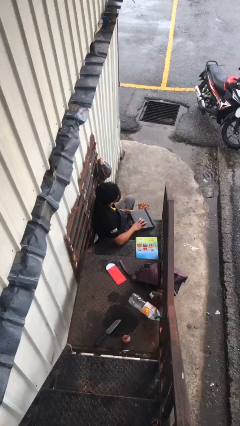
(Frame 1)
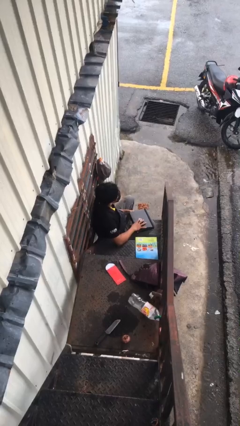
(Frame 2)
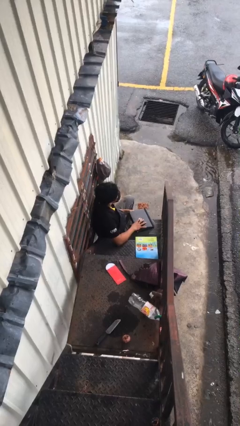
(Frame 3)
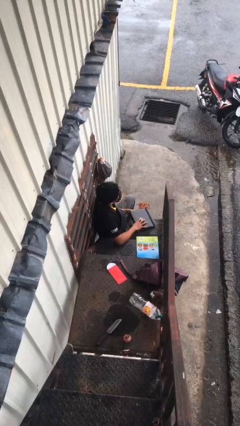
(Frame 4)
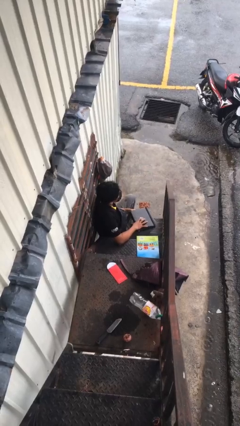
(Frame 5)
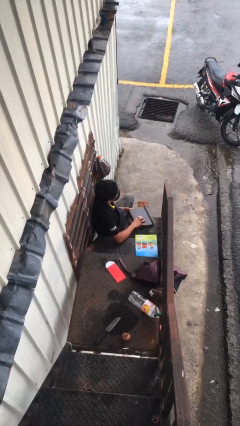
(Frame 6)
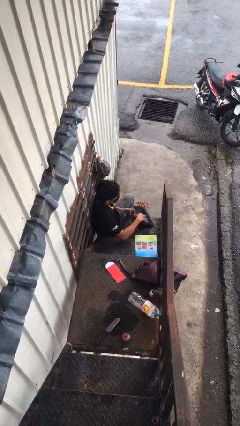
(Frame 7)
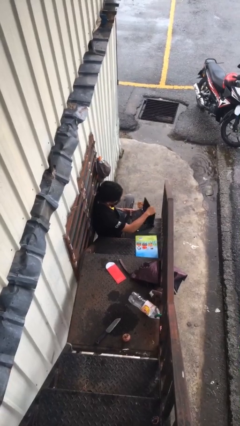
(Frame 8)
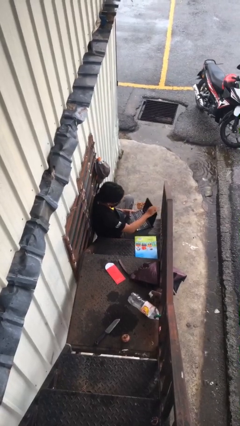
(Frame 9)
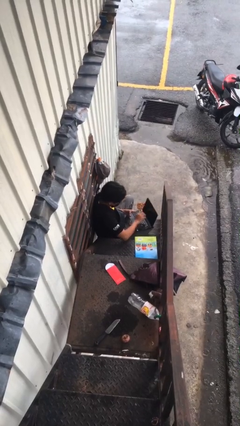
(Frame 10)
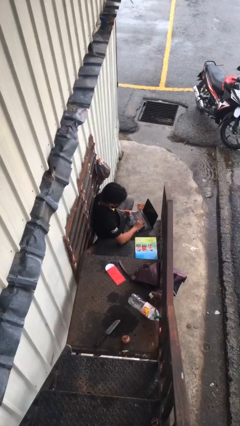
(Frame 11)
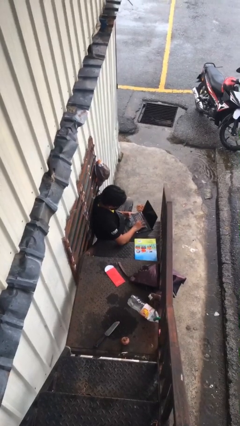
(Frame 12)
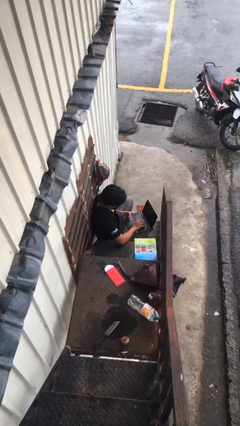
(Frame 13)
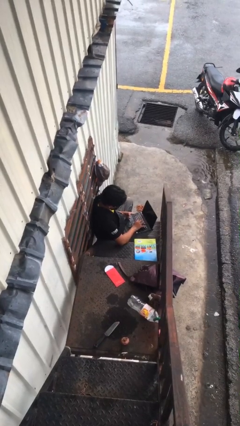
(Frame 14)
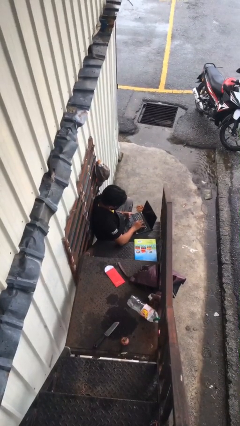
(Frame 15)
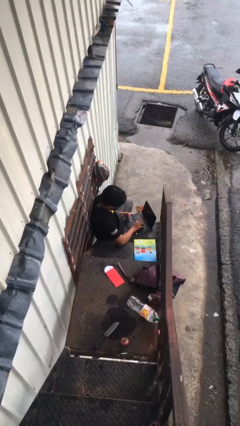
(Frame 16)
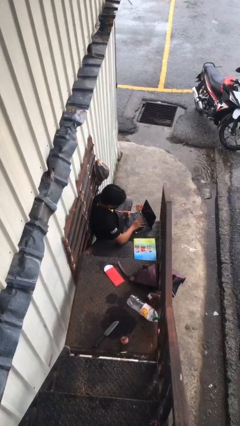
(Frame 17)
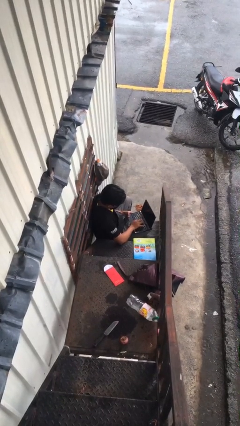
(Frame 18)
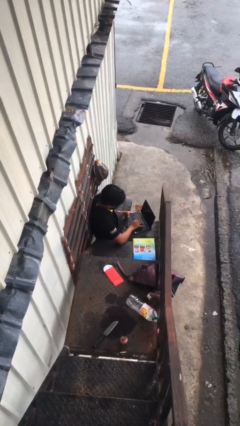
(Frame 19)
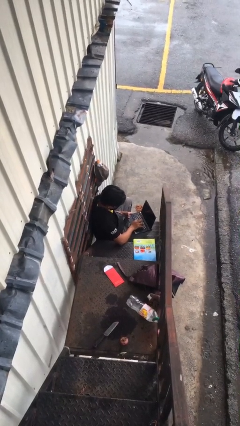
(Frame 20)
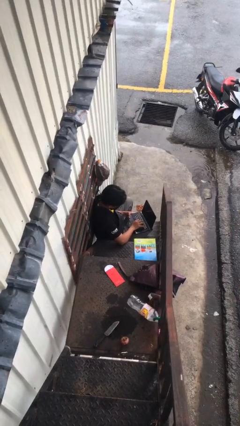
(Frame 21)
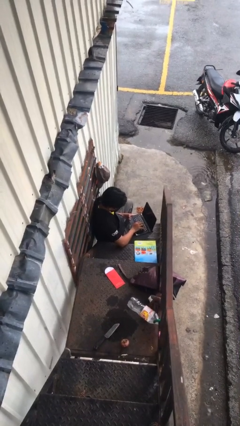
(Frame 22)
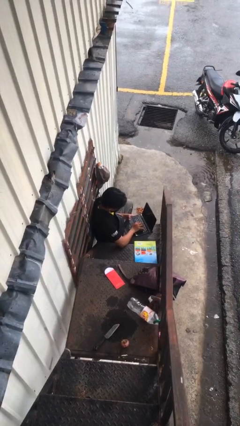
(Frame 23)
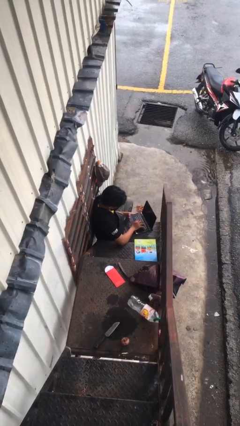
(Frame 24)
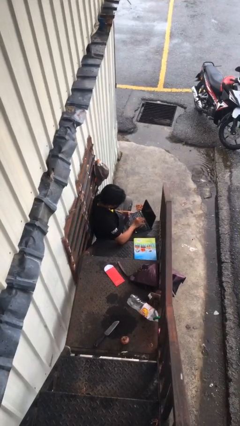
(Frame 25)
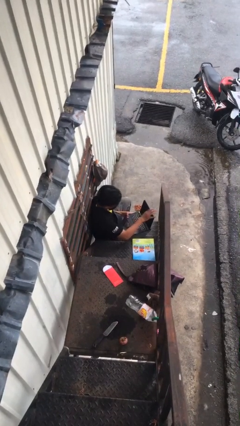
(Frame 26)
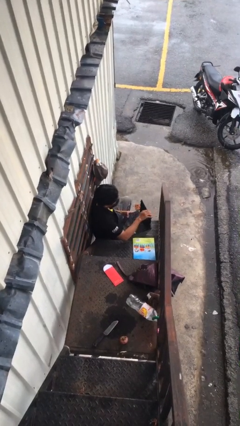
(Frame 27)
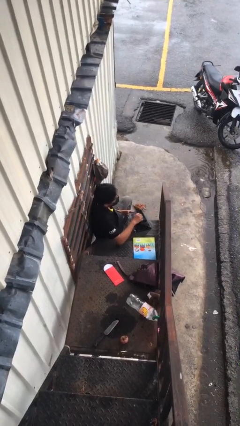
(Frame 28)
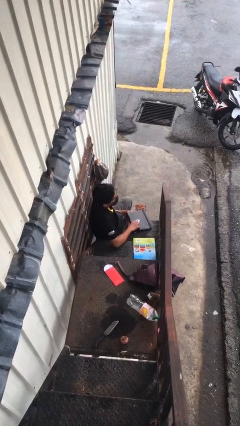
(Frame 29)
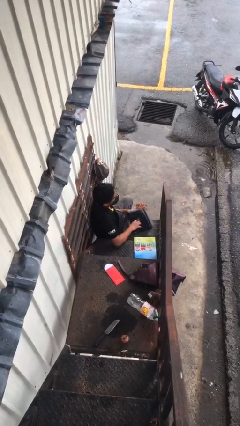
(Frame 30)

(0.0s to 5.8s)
person interacts with laptop

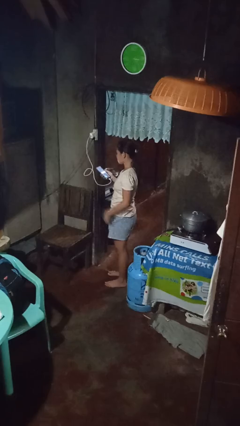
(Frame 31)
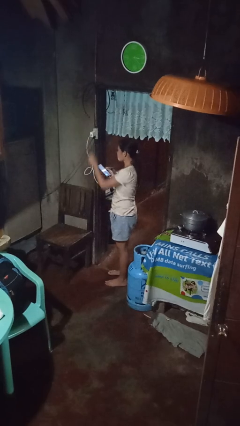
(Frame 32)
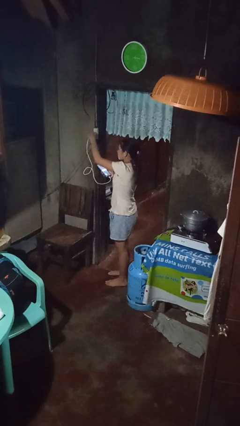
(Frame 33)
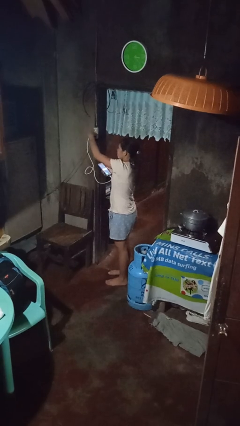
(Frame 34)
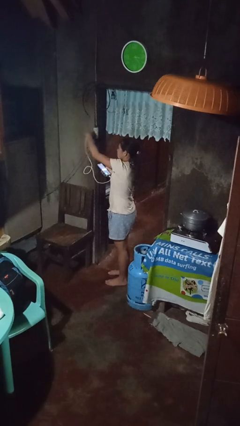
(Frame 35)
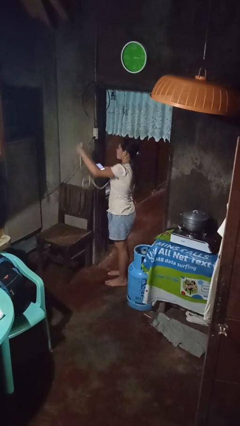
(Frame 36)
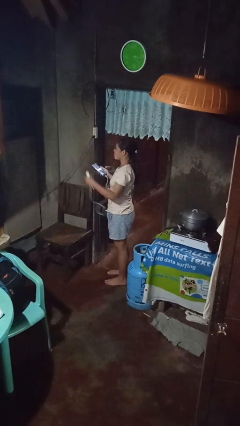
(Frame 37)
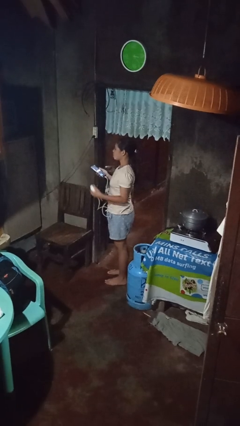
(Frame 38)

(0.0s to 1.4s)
person unplugs from electrical socket

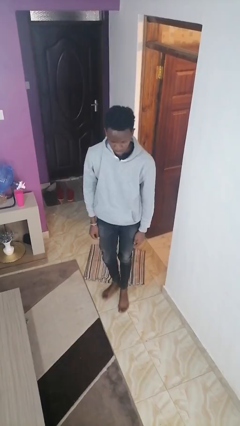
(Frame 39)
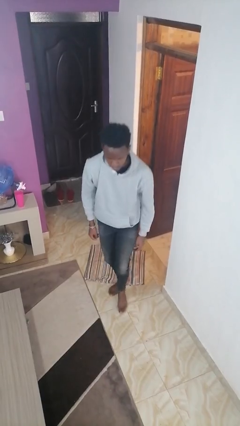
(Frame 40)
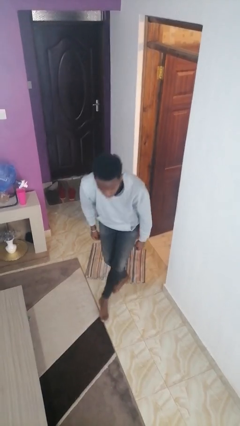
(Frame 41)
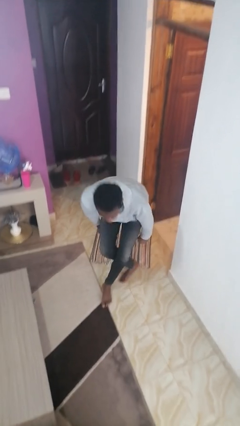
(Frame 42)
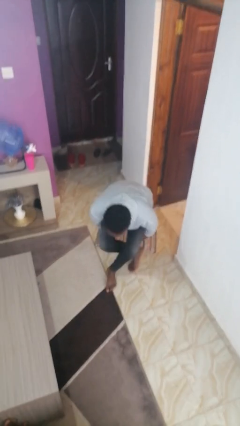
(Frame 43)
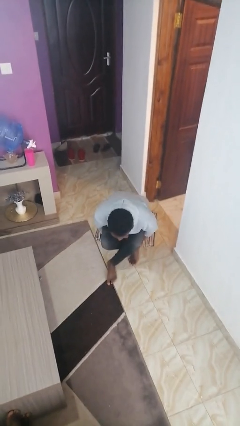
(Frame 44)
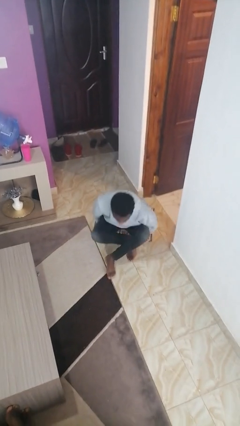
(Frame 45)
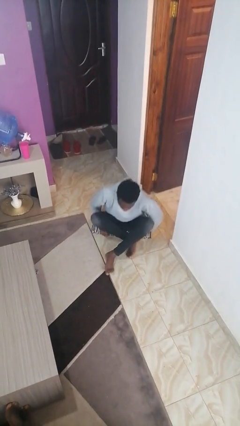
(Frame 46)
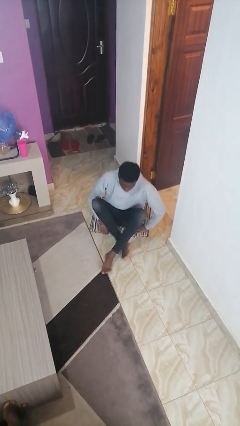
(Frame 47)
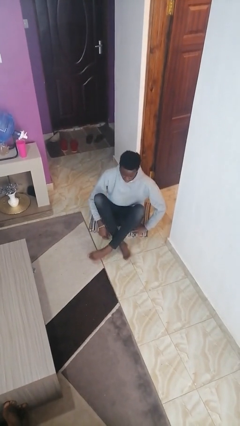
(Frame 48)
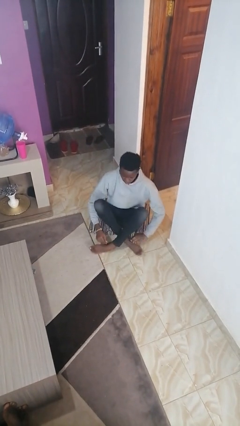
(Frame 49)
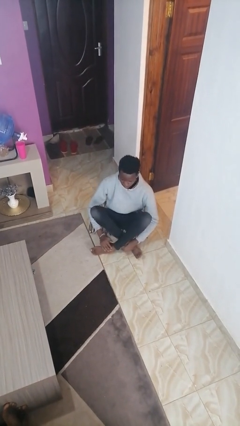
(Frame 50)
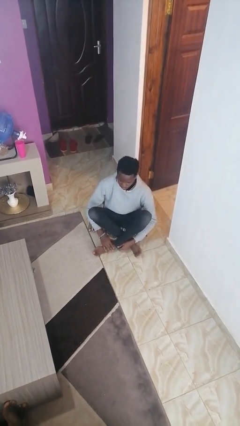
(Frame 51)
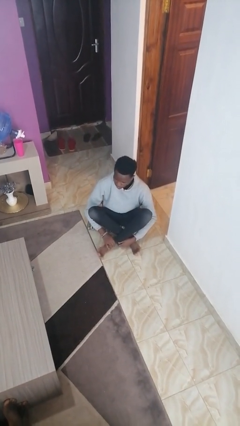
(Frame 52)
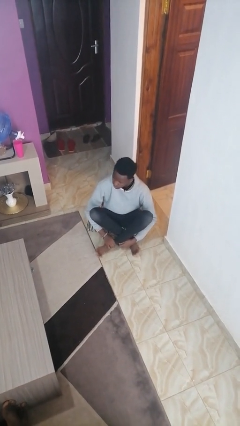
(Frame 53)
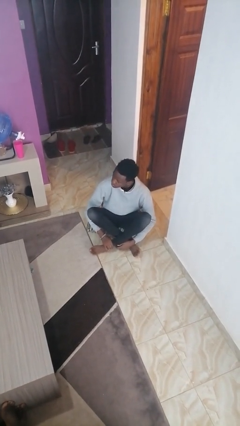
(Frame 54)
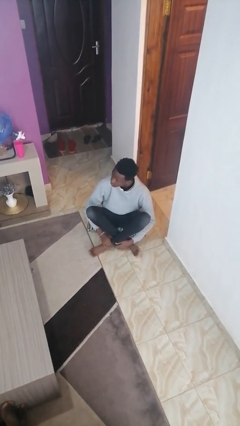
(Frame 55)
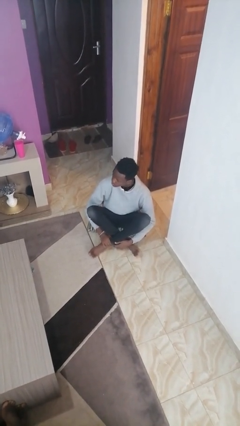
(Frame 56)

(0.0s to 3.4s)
person sits crisscross

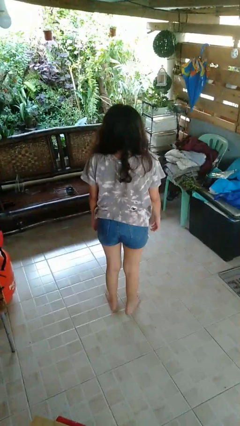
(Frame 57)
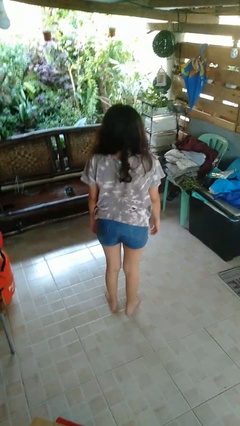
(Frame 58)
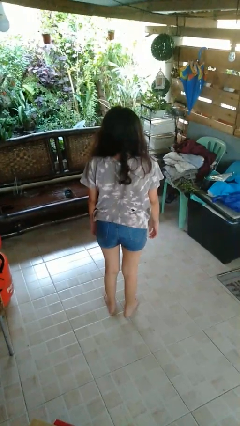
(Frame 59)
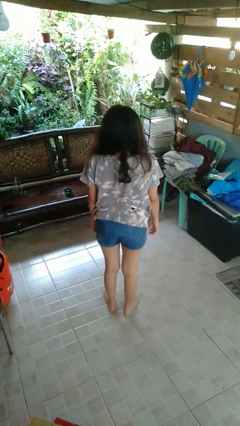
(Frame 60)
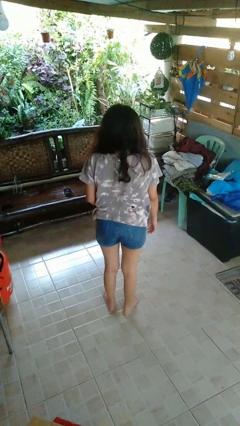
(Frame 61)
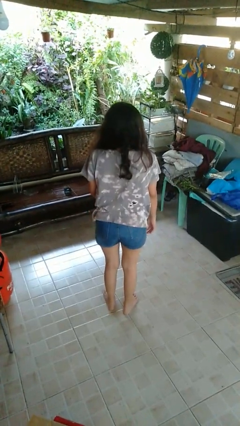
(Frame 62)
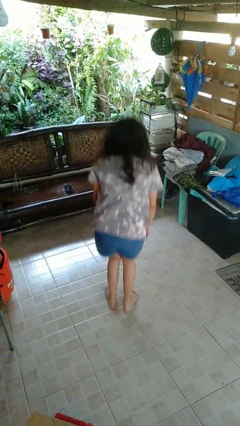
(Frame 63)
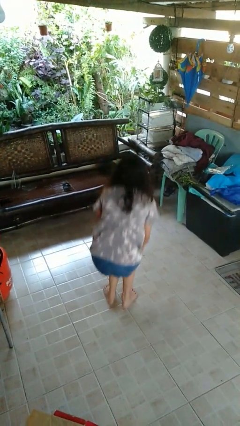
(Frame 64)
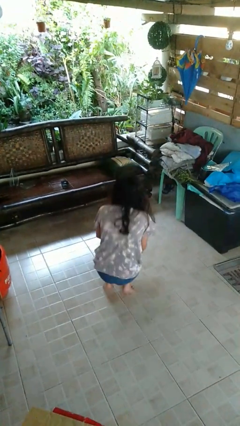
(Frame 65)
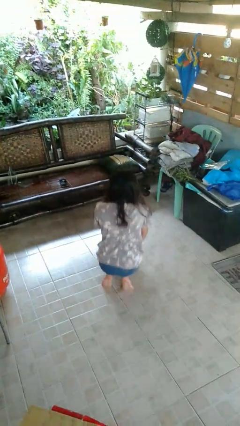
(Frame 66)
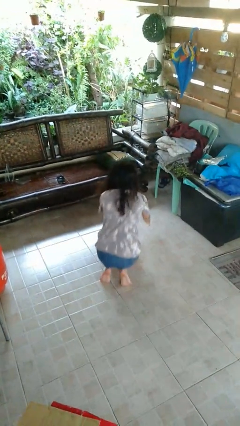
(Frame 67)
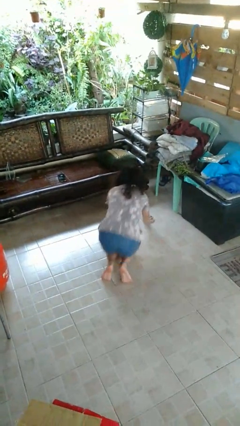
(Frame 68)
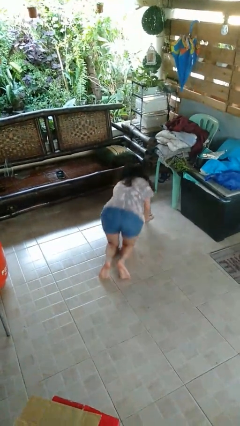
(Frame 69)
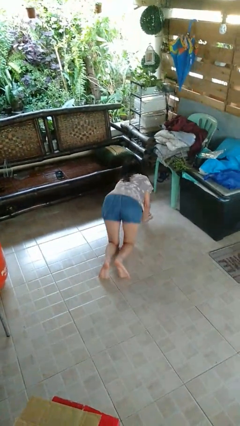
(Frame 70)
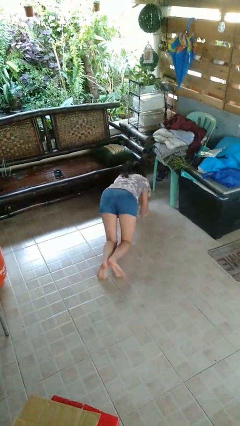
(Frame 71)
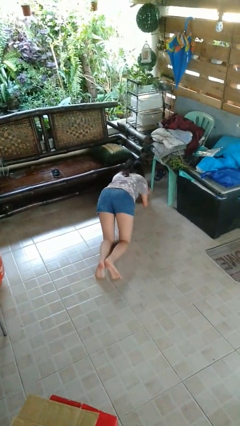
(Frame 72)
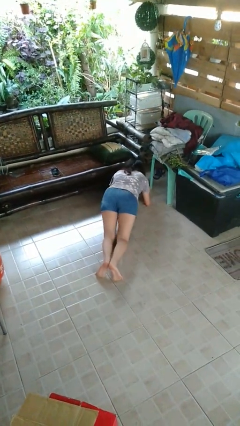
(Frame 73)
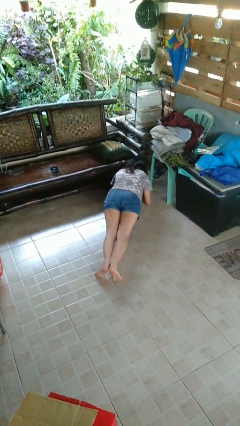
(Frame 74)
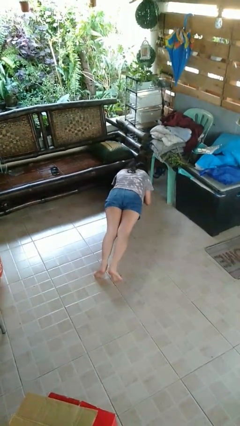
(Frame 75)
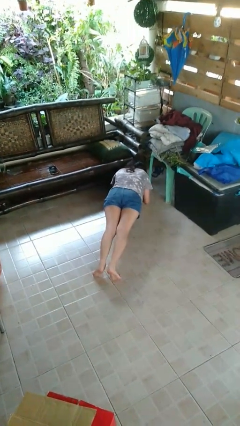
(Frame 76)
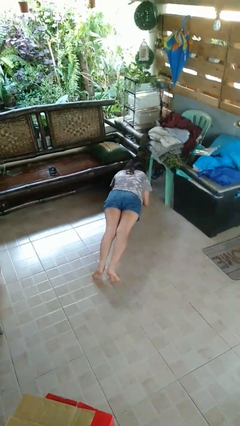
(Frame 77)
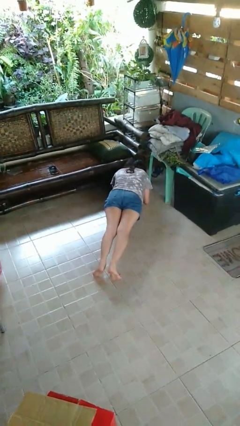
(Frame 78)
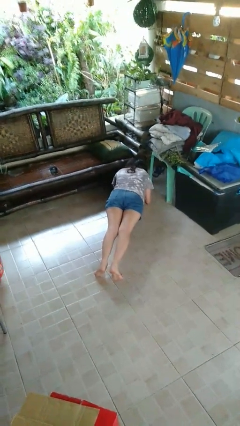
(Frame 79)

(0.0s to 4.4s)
person exercises with plank

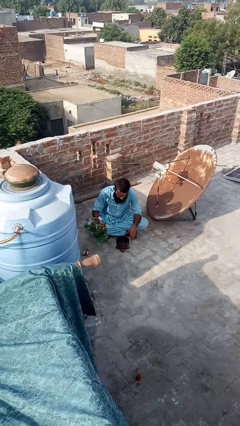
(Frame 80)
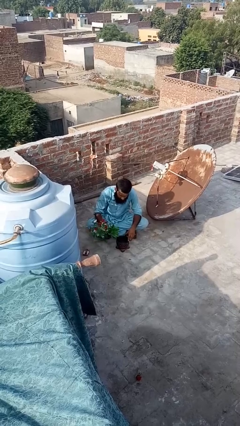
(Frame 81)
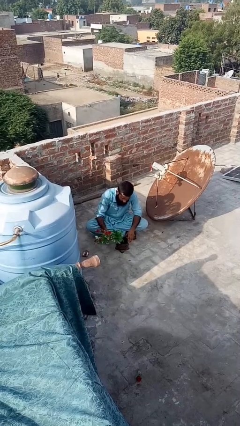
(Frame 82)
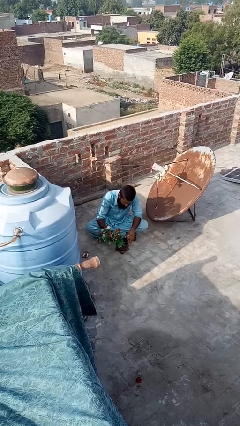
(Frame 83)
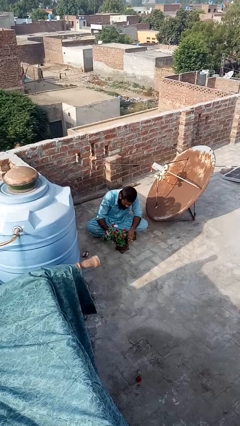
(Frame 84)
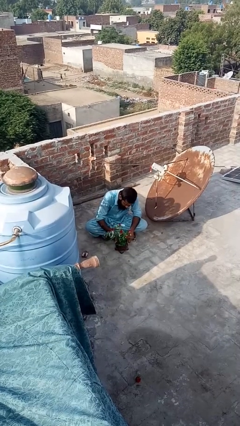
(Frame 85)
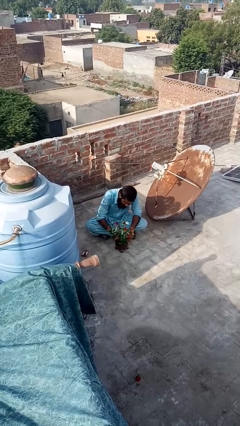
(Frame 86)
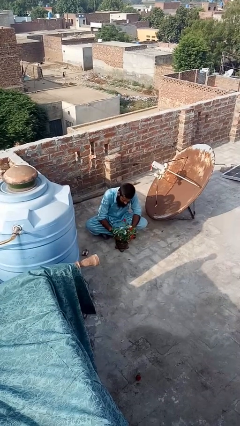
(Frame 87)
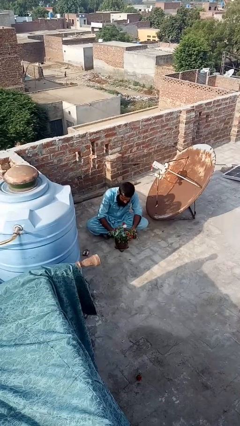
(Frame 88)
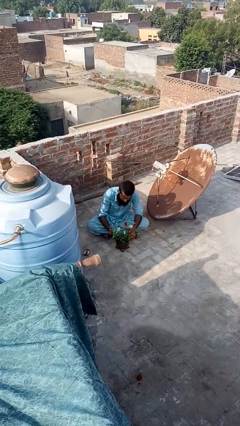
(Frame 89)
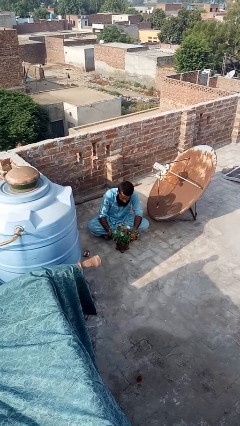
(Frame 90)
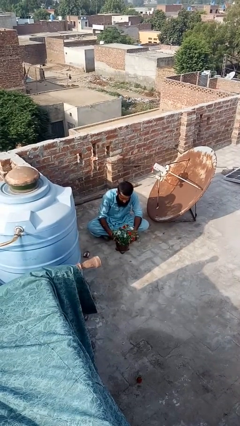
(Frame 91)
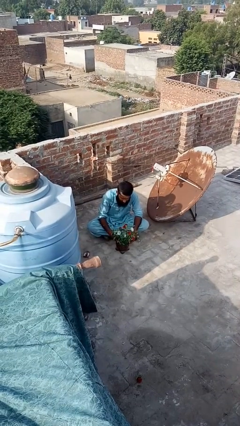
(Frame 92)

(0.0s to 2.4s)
person arranges flowers in vase
